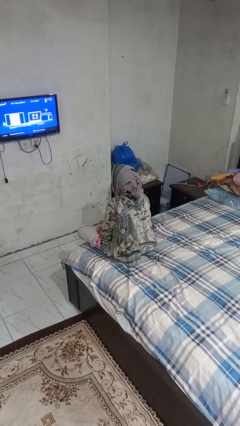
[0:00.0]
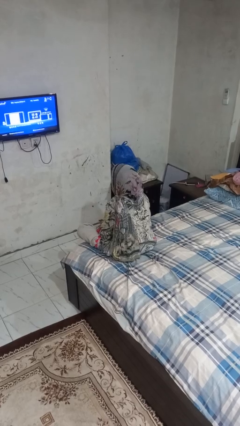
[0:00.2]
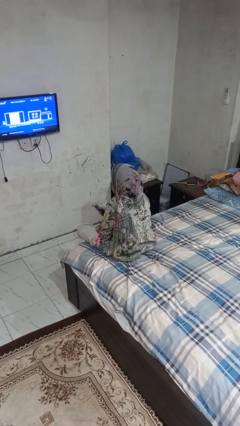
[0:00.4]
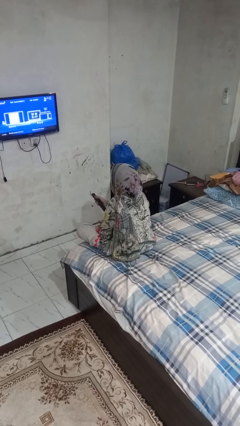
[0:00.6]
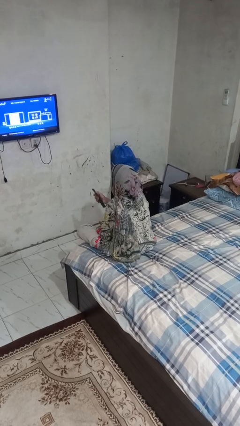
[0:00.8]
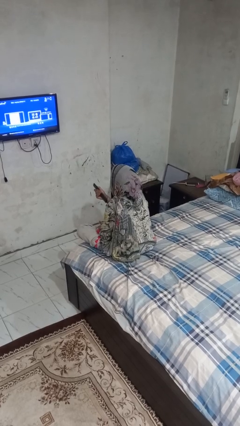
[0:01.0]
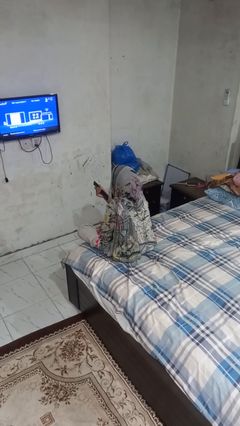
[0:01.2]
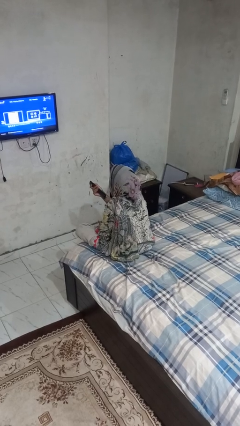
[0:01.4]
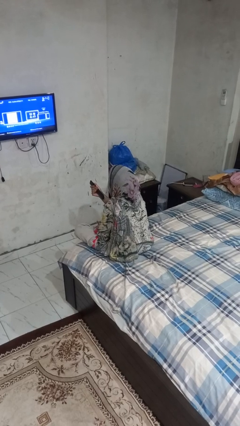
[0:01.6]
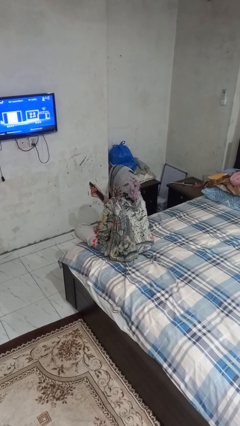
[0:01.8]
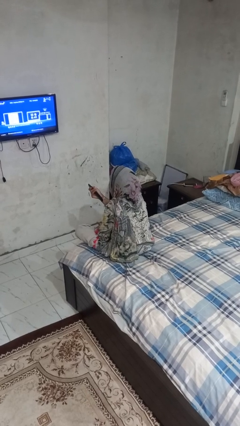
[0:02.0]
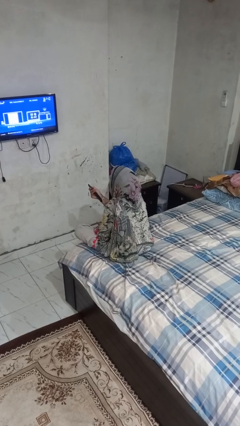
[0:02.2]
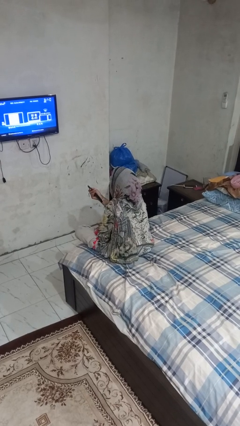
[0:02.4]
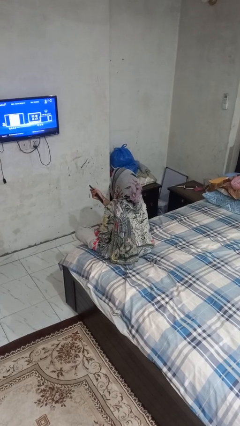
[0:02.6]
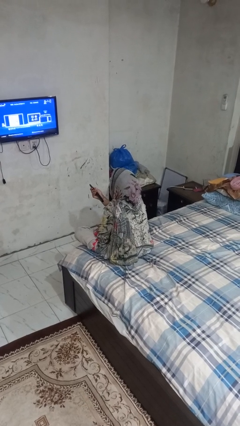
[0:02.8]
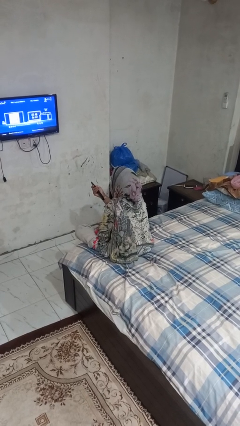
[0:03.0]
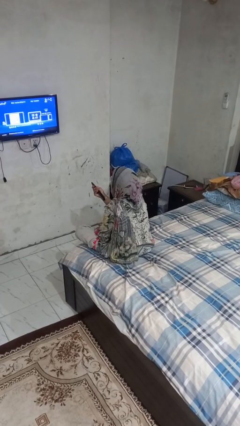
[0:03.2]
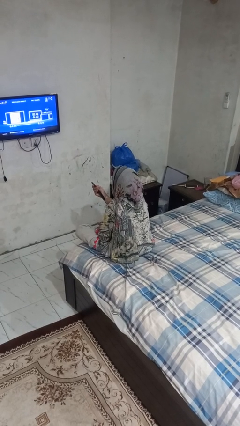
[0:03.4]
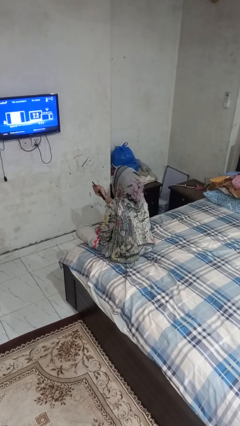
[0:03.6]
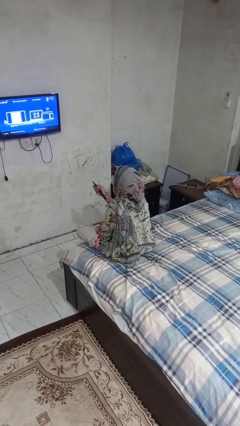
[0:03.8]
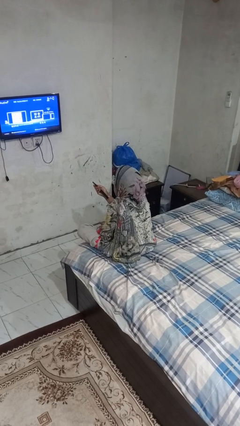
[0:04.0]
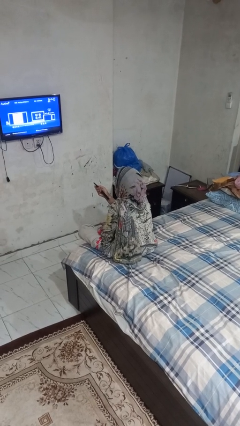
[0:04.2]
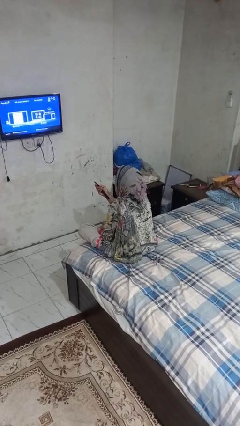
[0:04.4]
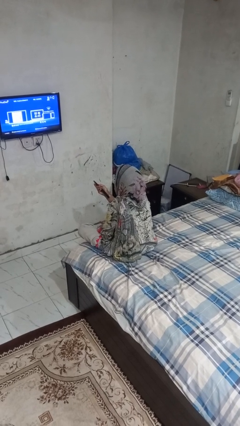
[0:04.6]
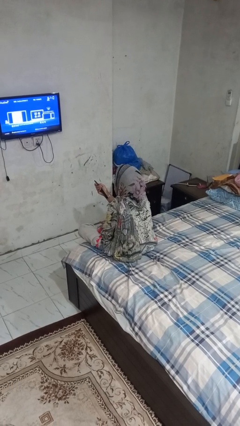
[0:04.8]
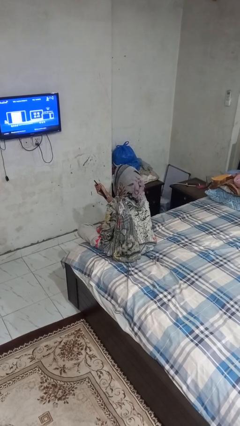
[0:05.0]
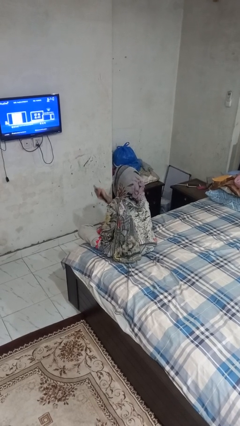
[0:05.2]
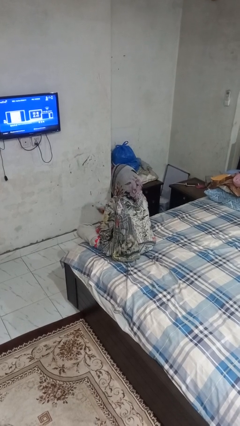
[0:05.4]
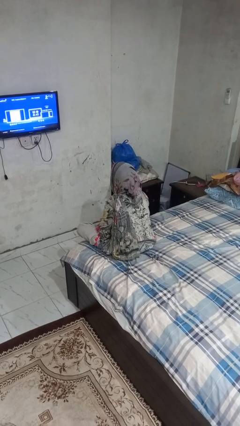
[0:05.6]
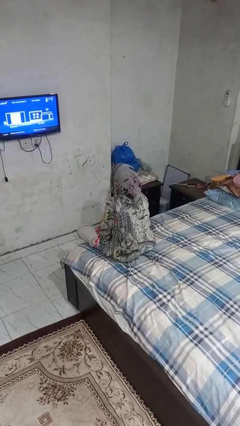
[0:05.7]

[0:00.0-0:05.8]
person uses television remote

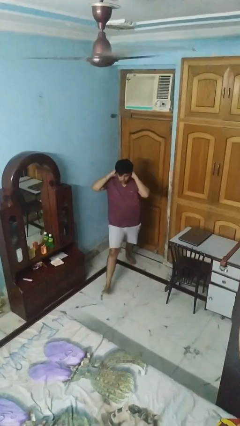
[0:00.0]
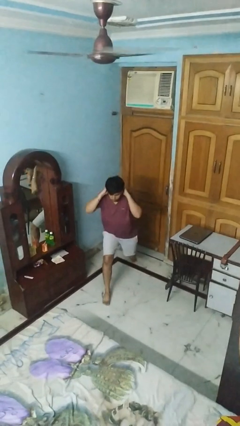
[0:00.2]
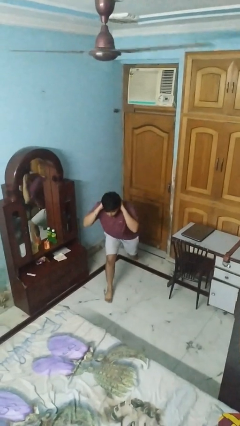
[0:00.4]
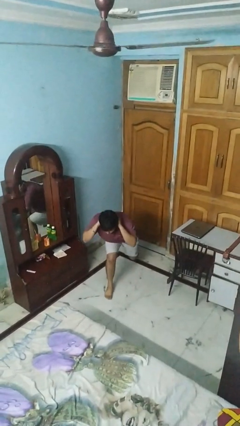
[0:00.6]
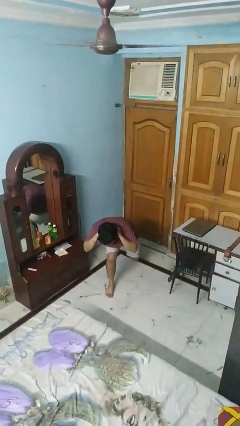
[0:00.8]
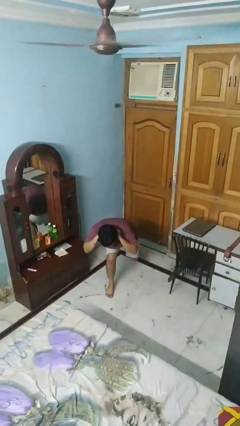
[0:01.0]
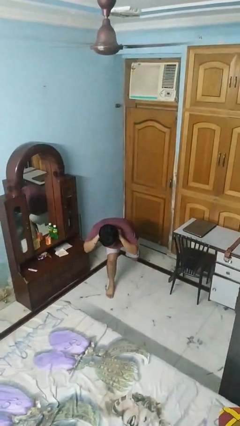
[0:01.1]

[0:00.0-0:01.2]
person exercises with lunges

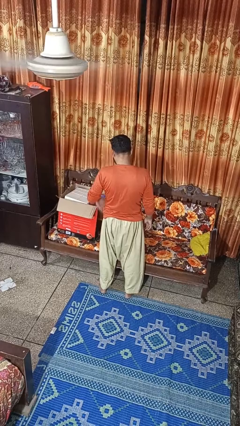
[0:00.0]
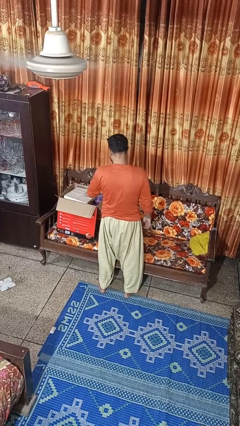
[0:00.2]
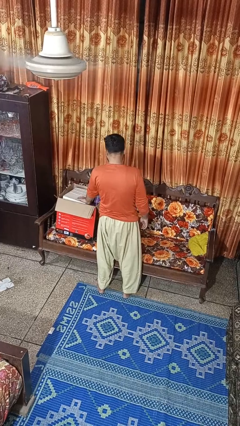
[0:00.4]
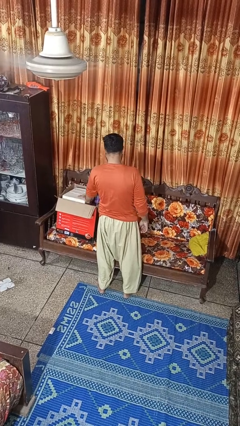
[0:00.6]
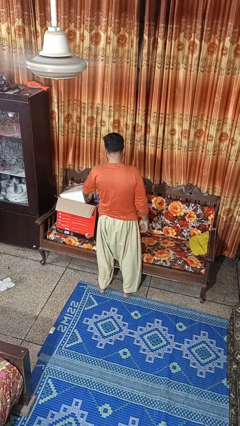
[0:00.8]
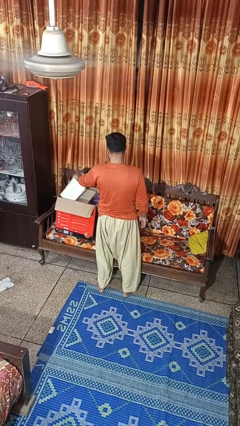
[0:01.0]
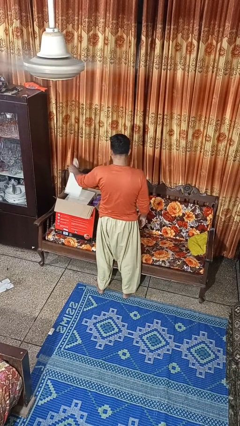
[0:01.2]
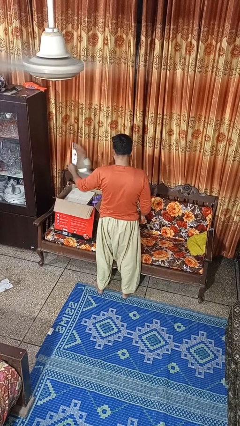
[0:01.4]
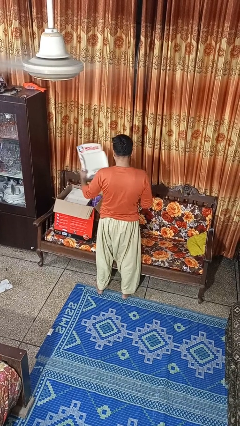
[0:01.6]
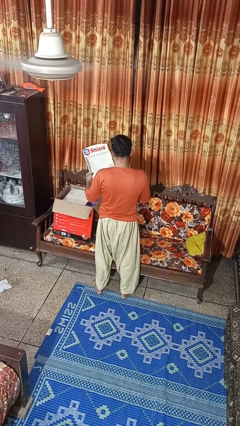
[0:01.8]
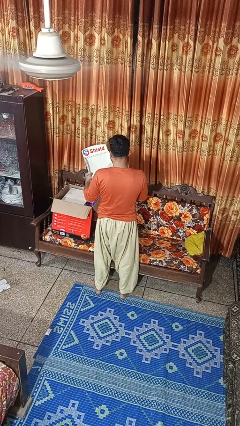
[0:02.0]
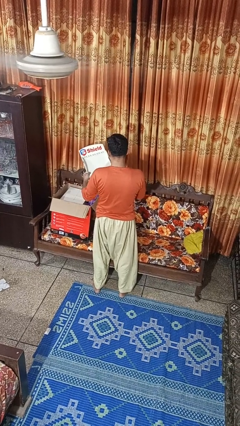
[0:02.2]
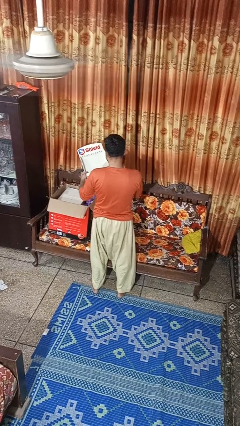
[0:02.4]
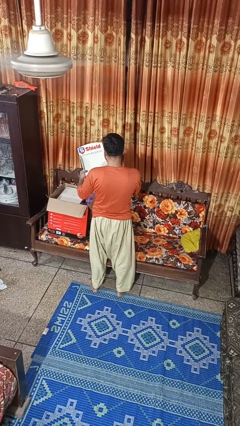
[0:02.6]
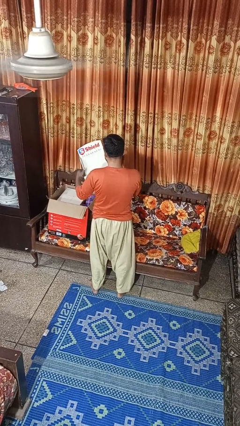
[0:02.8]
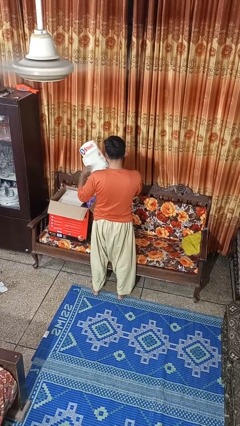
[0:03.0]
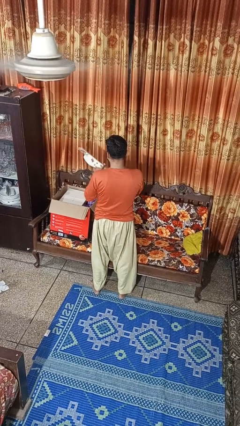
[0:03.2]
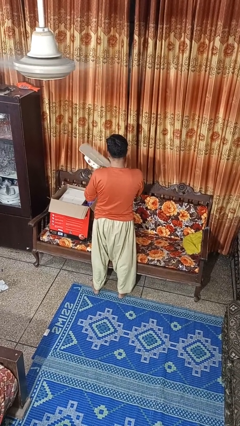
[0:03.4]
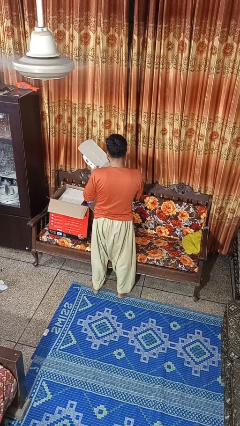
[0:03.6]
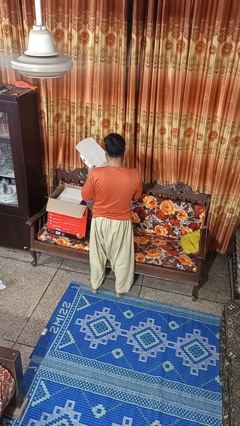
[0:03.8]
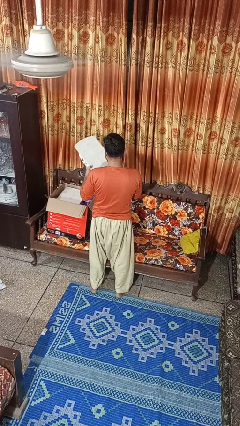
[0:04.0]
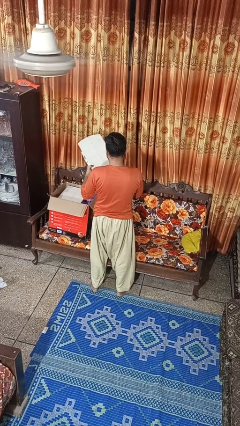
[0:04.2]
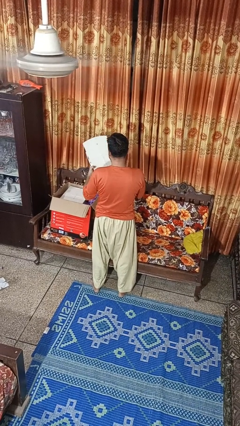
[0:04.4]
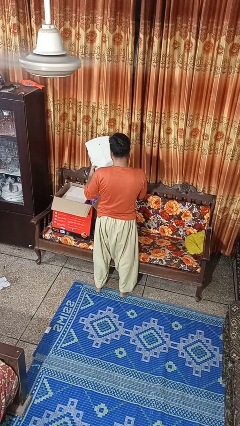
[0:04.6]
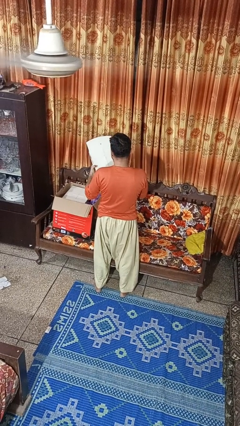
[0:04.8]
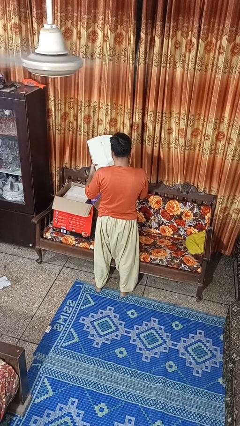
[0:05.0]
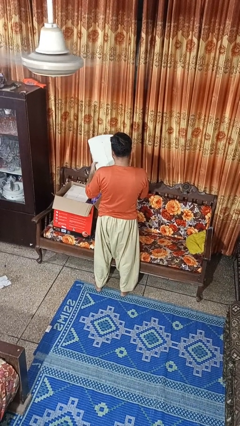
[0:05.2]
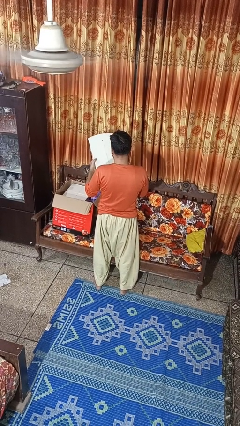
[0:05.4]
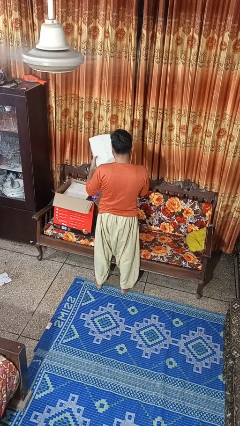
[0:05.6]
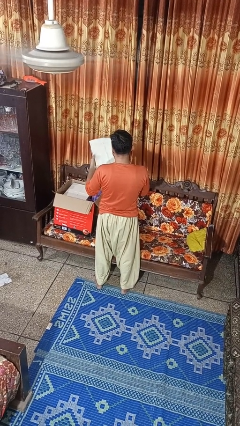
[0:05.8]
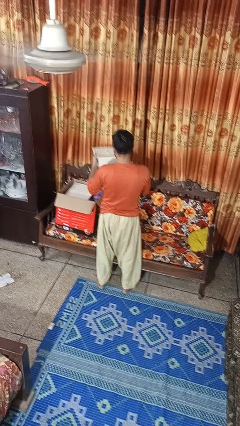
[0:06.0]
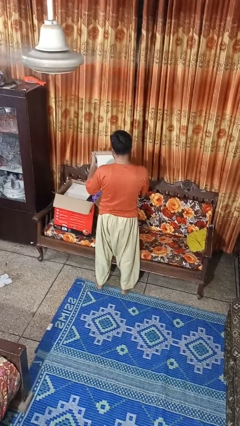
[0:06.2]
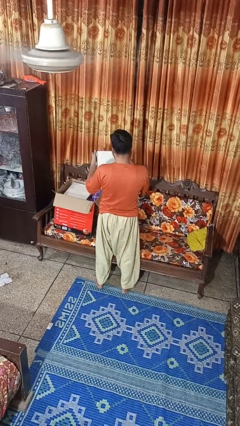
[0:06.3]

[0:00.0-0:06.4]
person takes object from box

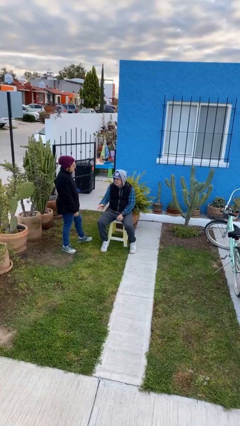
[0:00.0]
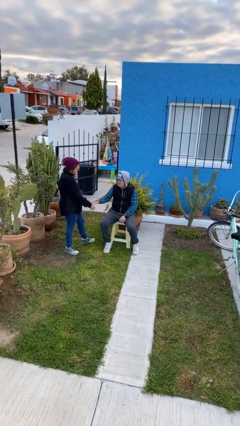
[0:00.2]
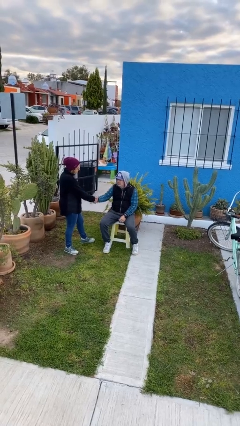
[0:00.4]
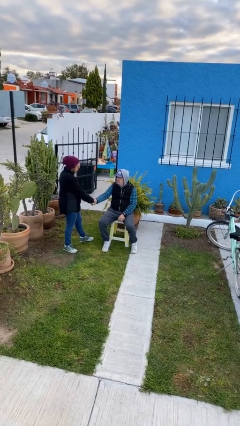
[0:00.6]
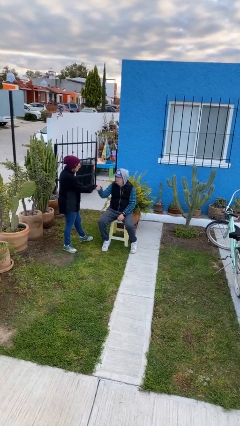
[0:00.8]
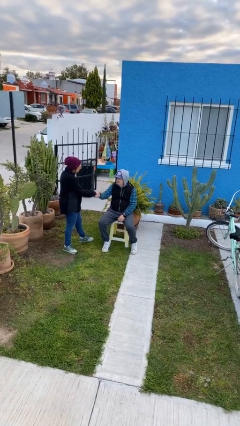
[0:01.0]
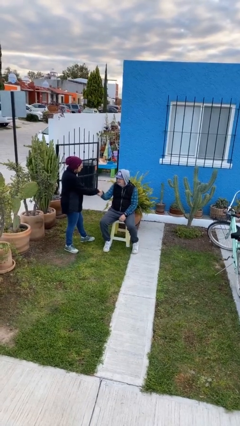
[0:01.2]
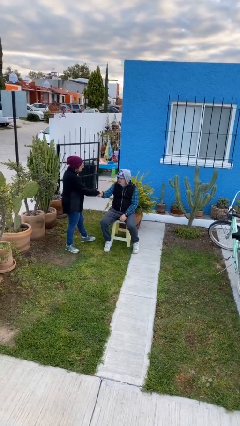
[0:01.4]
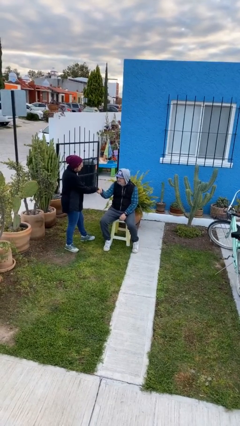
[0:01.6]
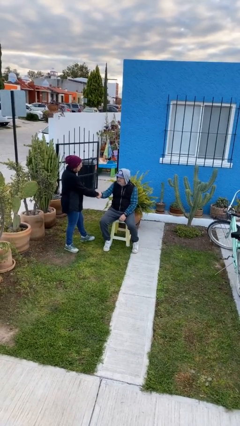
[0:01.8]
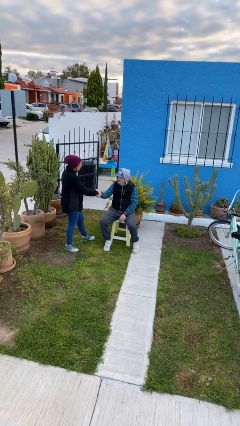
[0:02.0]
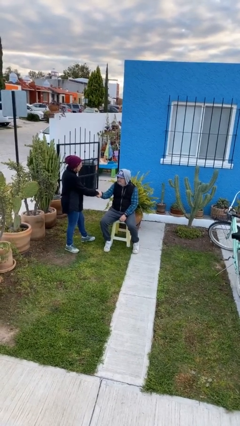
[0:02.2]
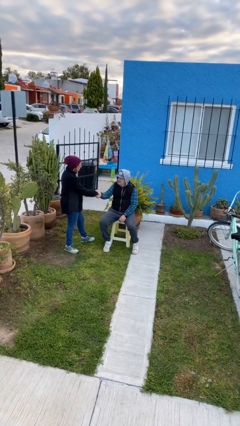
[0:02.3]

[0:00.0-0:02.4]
person shakes hand

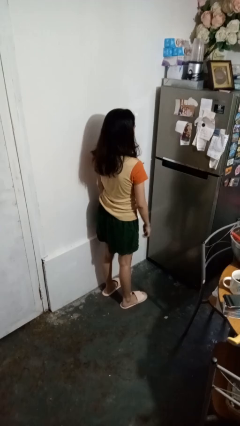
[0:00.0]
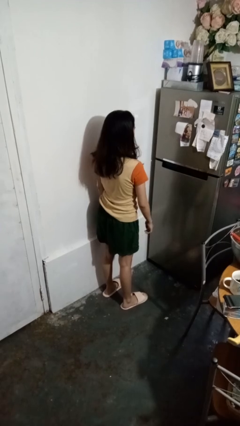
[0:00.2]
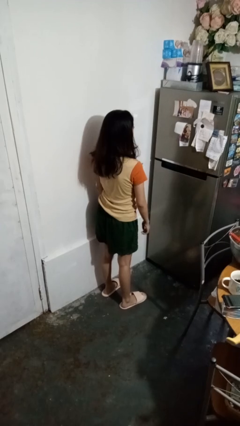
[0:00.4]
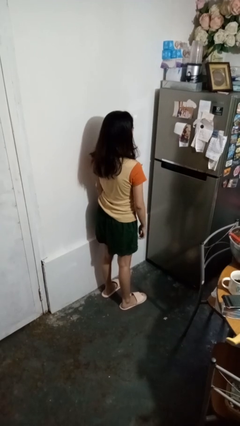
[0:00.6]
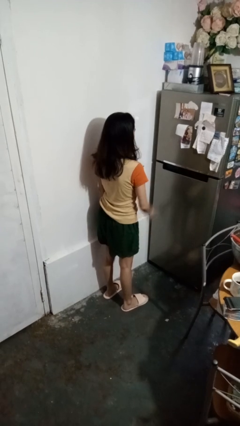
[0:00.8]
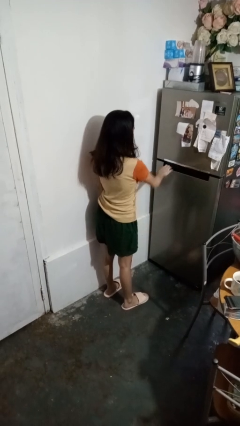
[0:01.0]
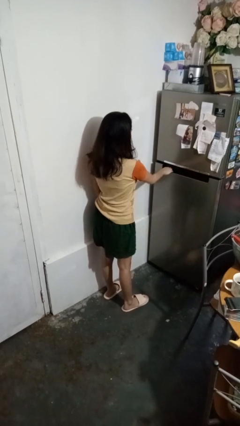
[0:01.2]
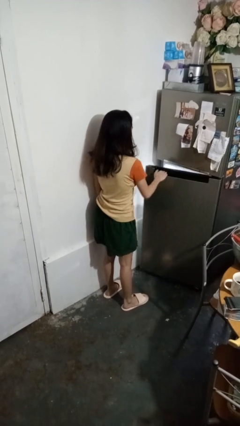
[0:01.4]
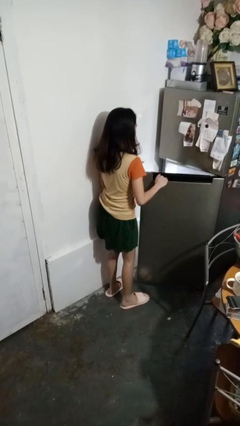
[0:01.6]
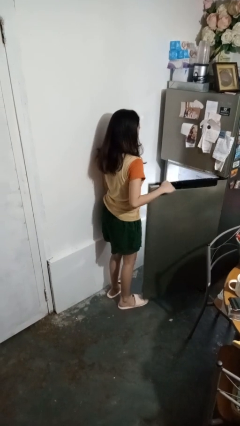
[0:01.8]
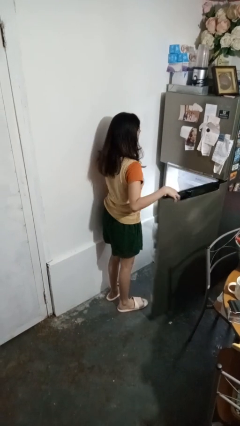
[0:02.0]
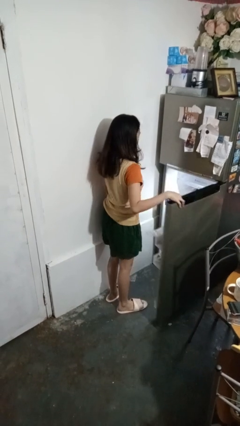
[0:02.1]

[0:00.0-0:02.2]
person opens refrigerator
